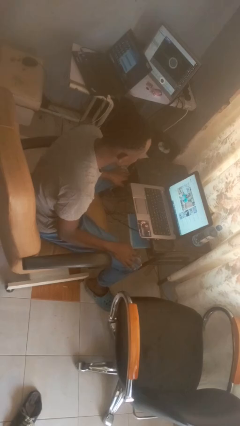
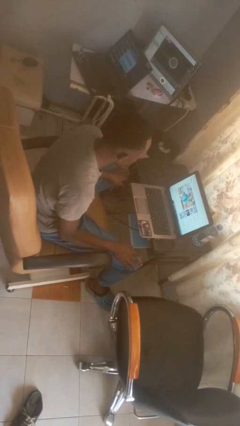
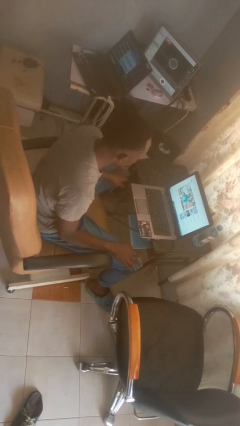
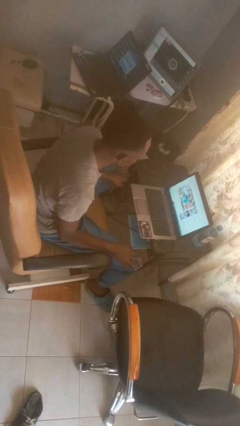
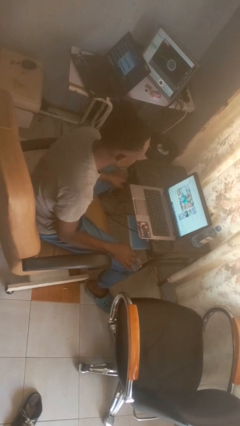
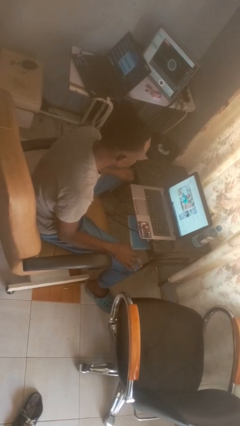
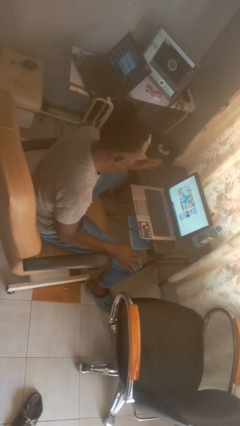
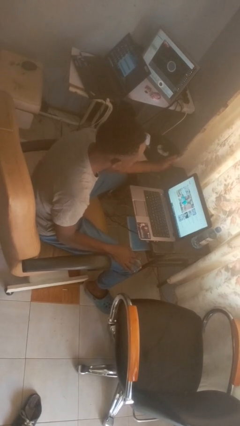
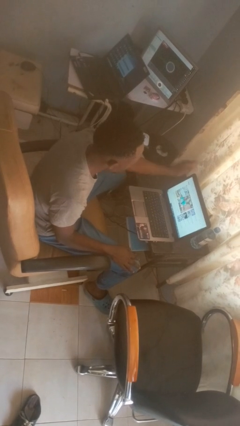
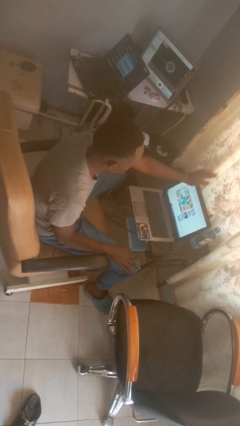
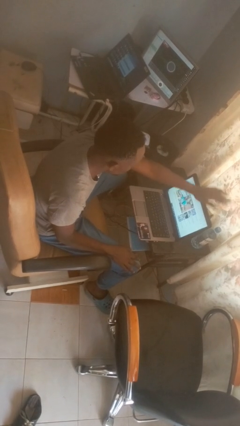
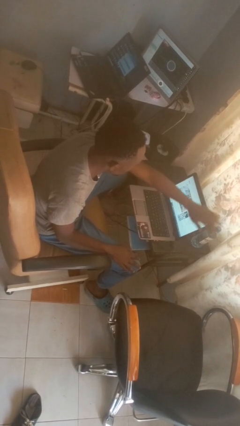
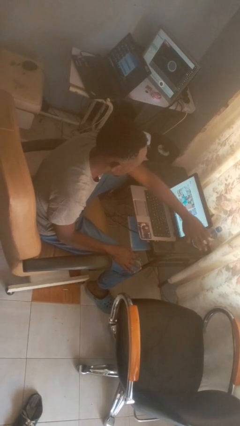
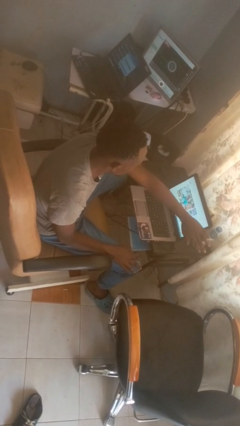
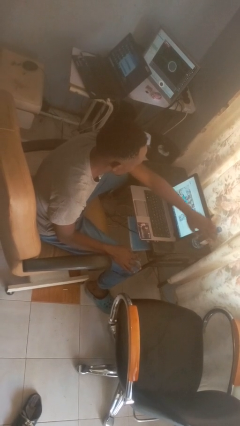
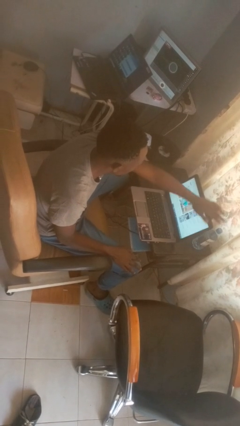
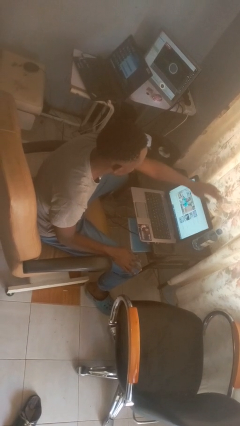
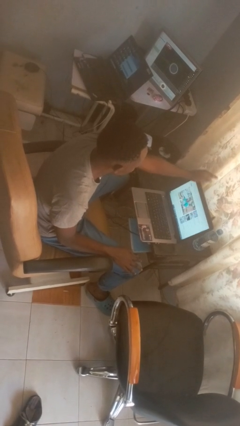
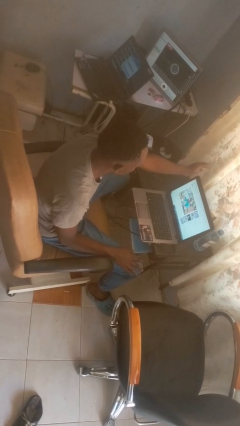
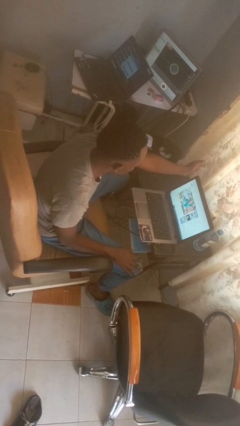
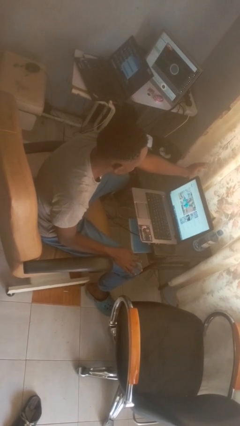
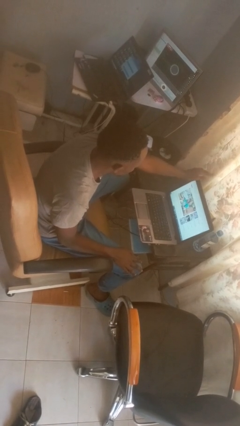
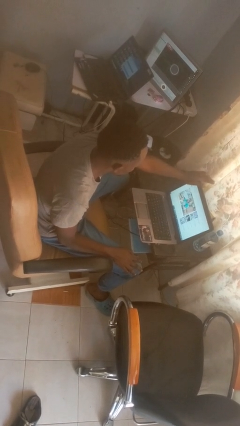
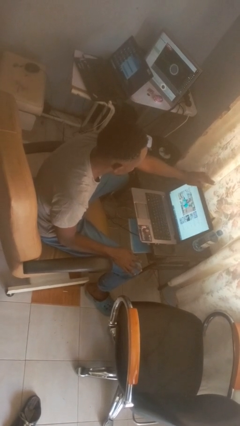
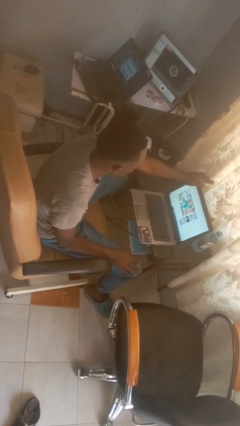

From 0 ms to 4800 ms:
person waves hand over object

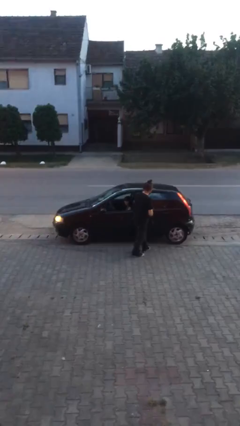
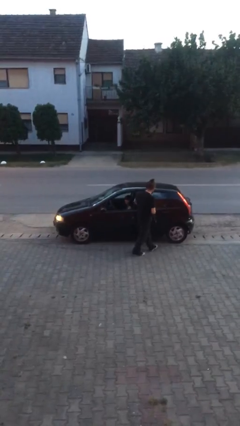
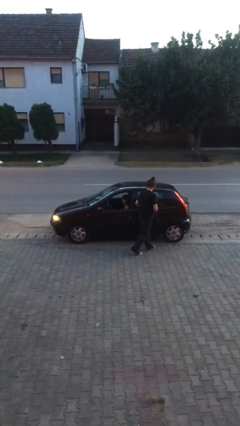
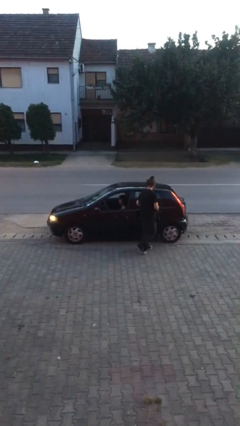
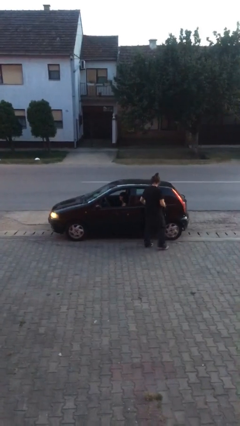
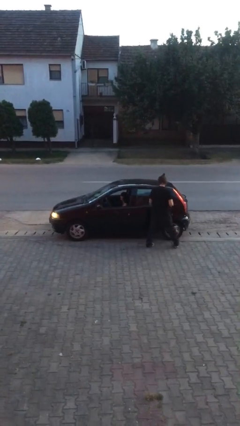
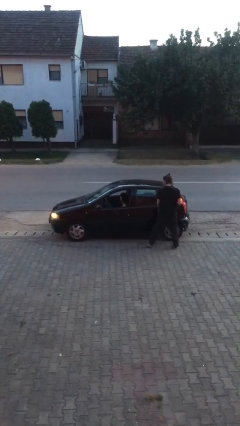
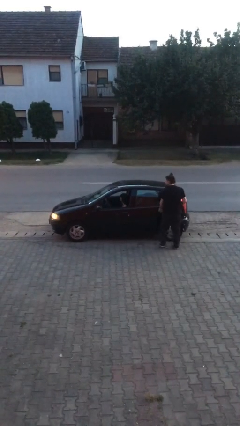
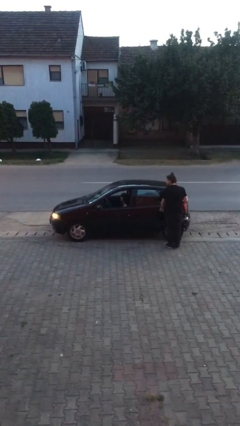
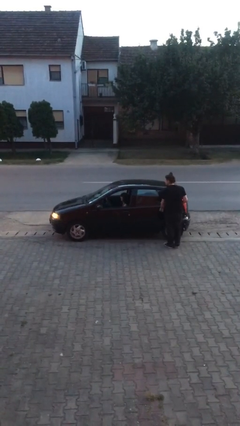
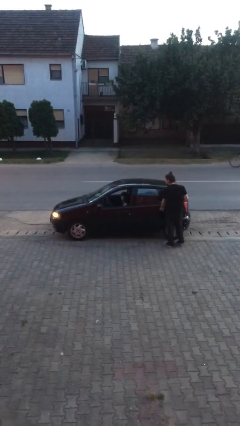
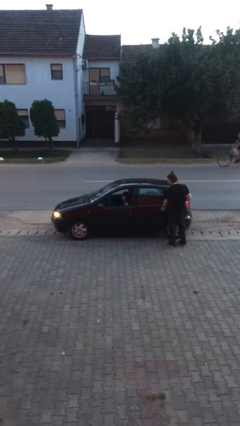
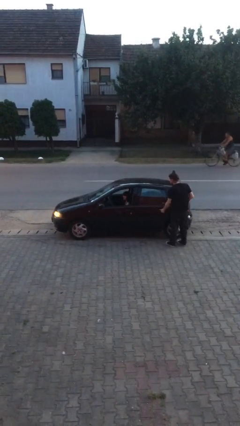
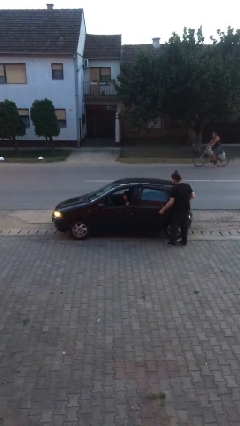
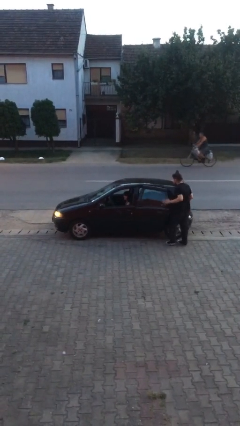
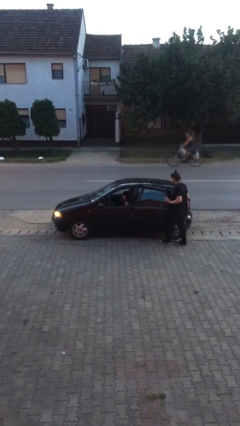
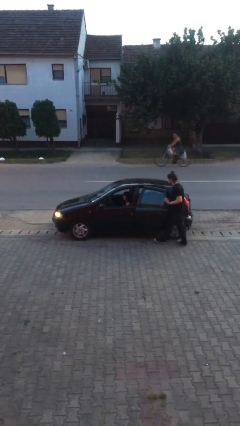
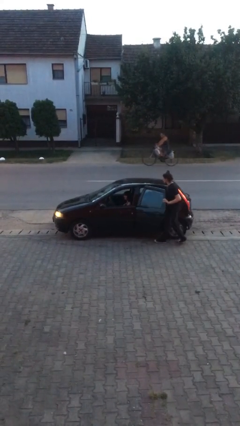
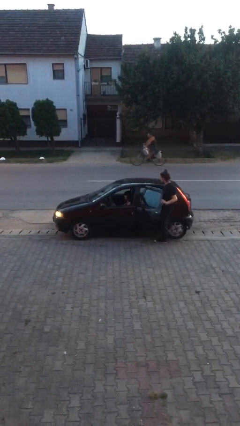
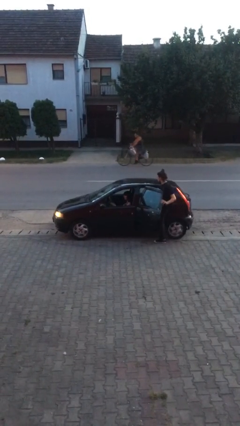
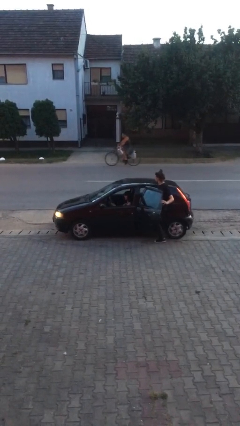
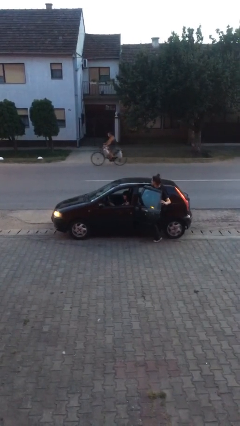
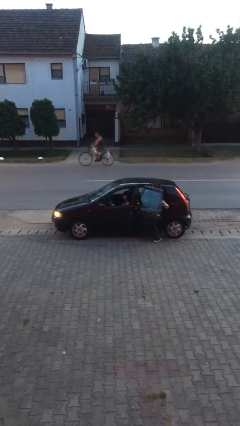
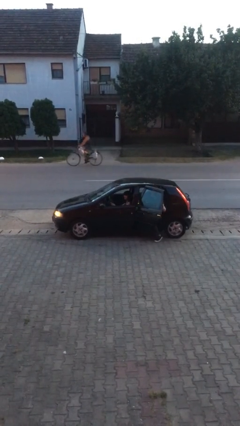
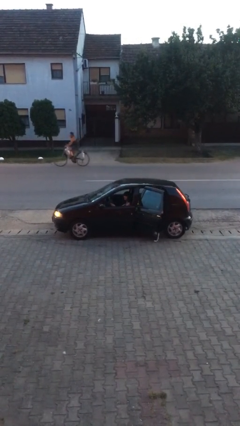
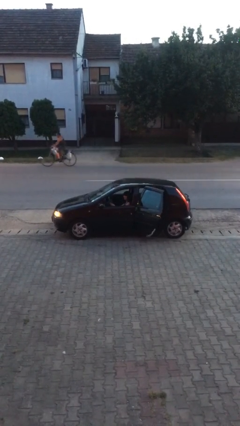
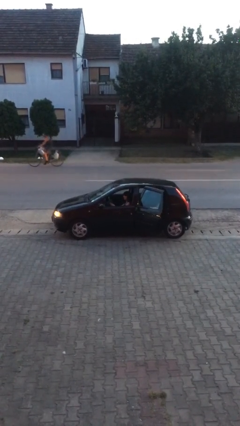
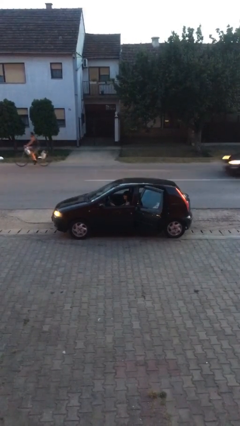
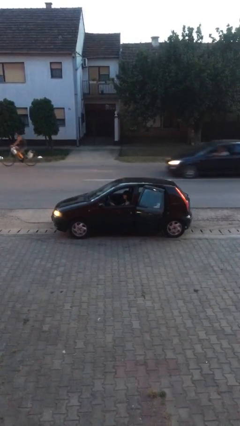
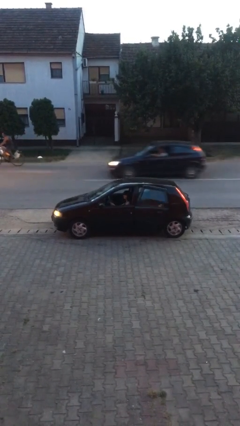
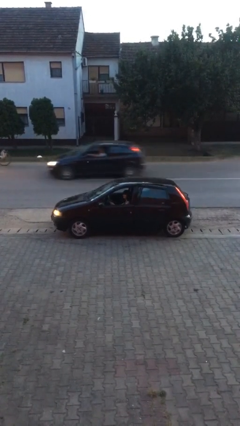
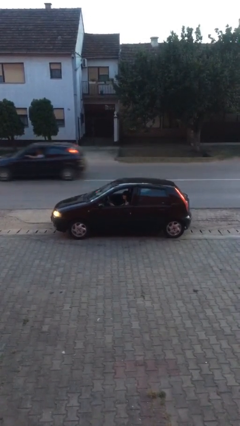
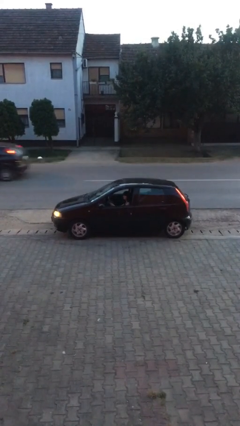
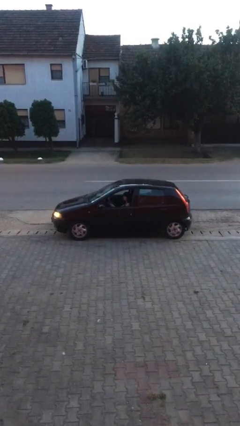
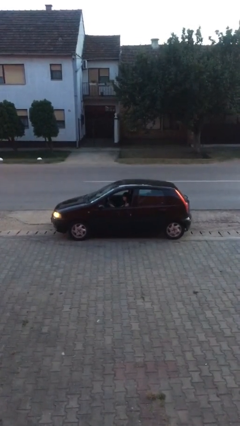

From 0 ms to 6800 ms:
car picks up person

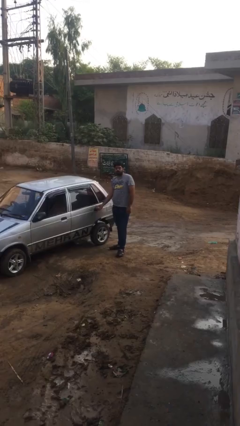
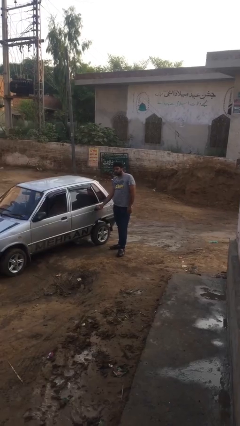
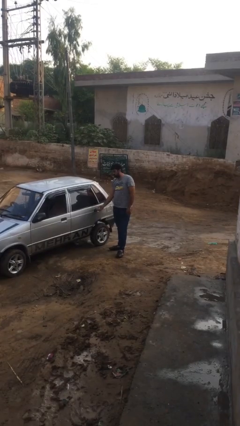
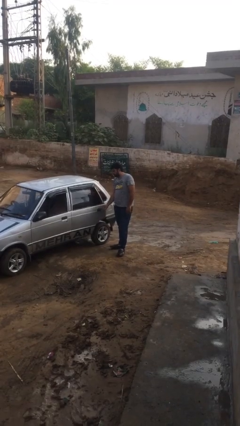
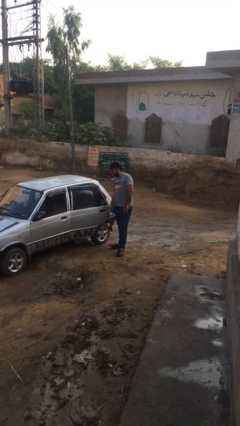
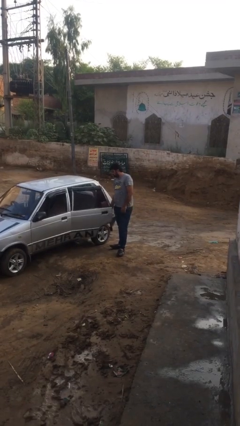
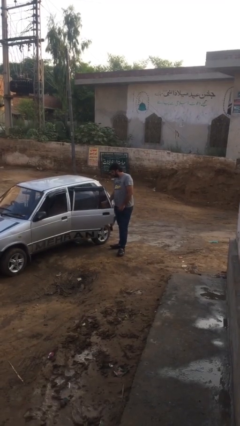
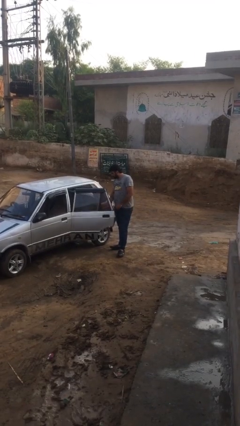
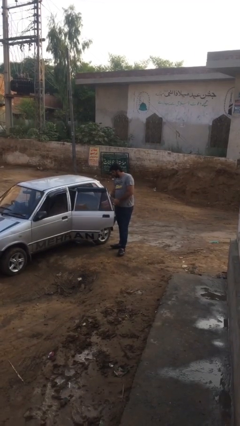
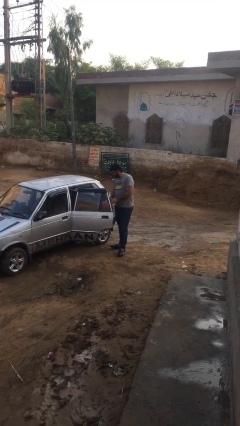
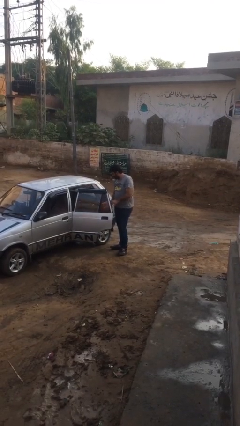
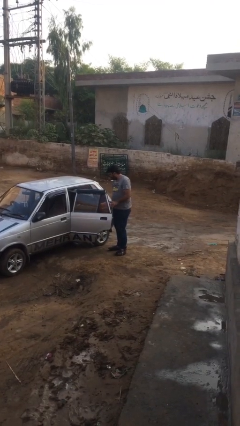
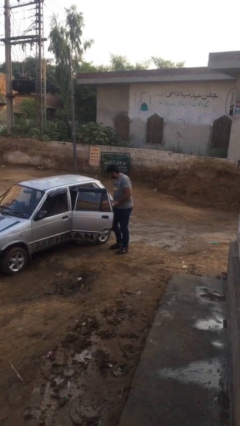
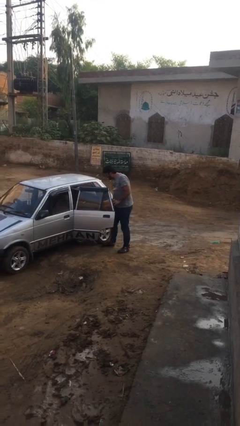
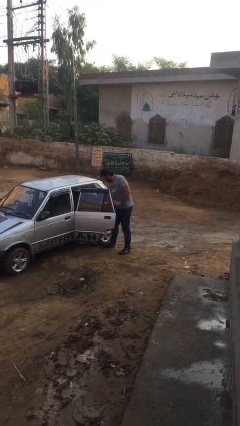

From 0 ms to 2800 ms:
person opens car door

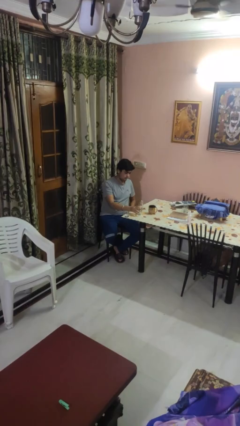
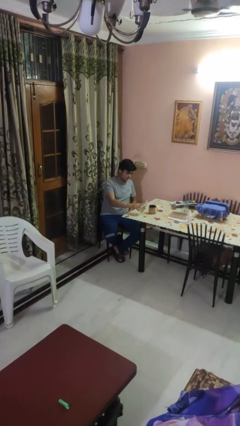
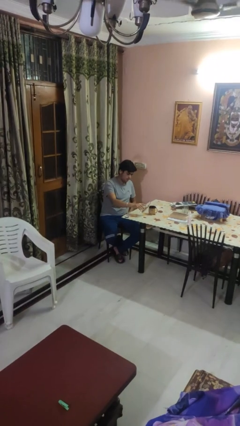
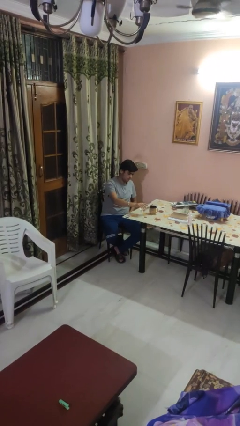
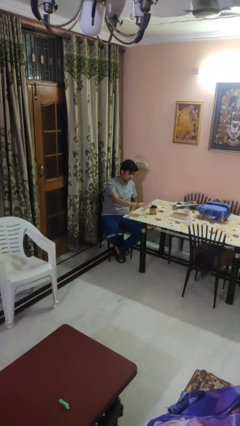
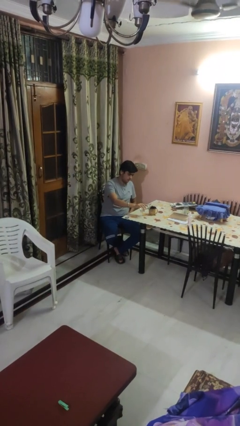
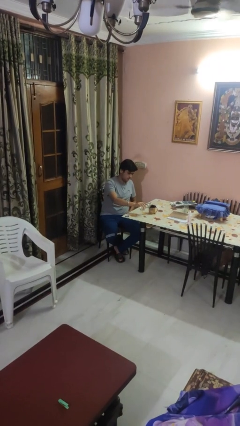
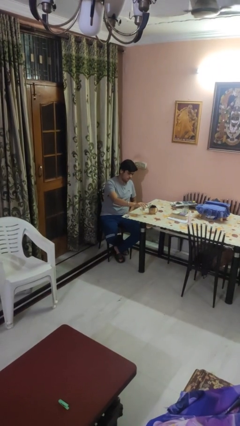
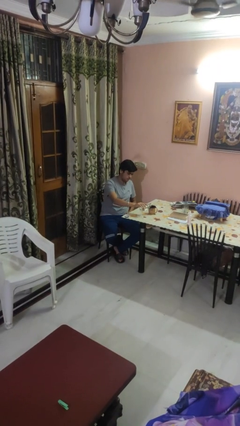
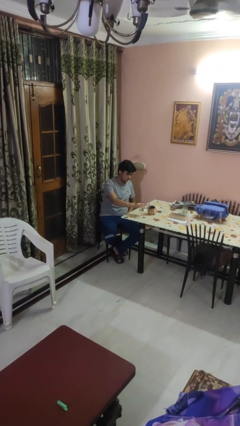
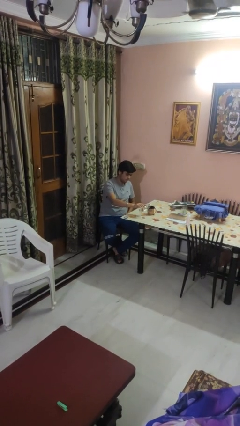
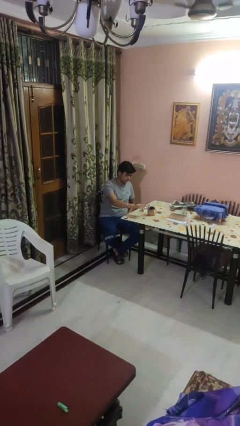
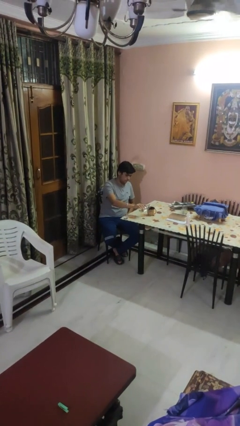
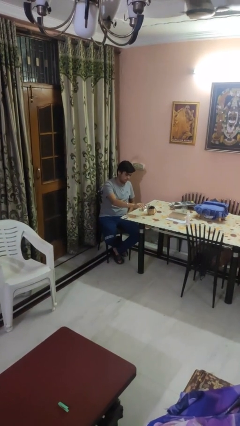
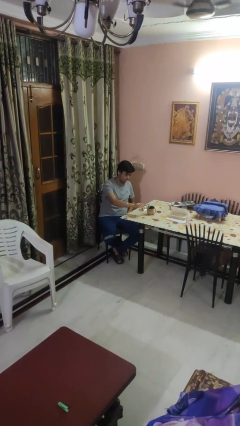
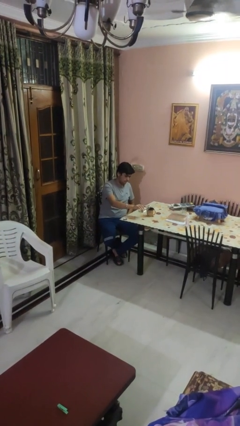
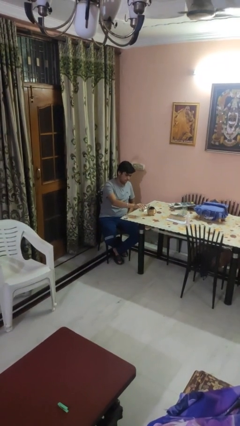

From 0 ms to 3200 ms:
person pours liquid into cup
